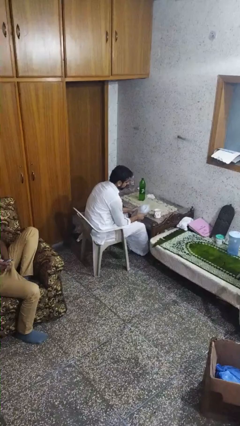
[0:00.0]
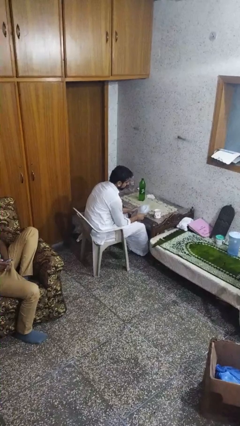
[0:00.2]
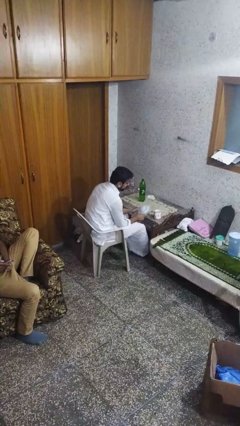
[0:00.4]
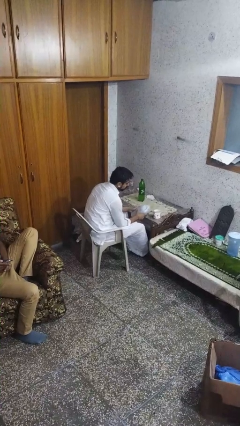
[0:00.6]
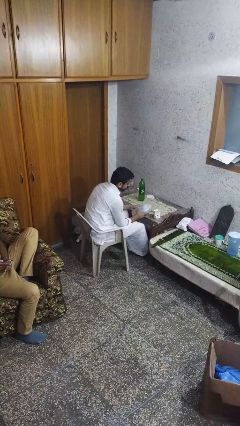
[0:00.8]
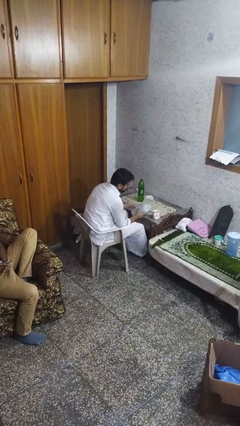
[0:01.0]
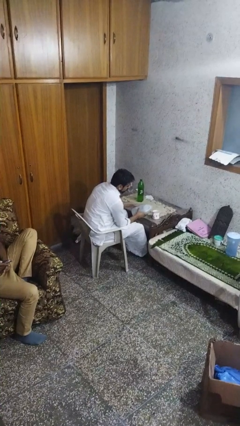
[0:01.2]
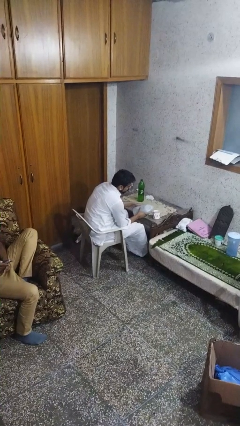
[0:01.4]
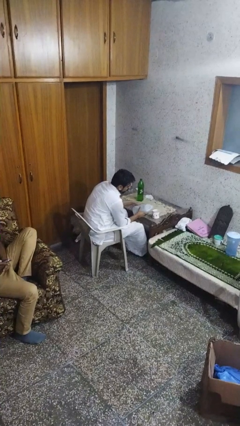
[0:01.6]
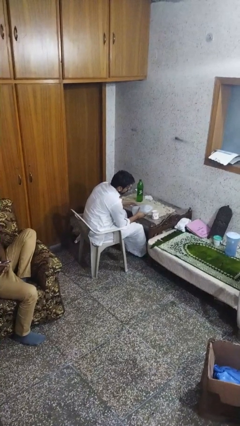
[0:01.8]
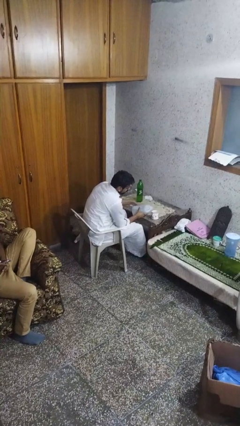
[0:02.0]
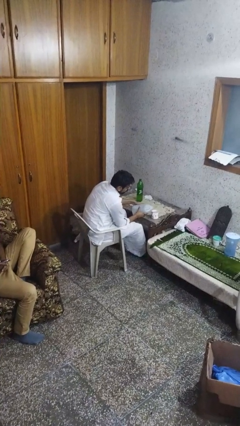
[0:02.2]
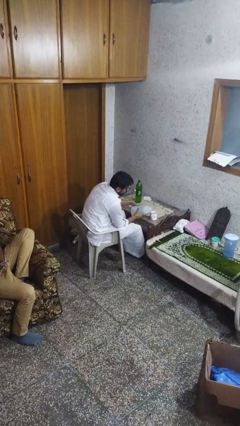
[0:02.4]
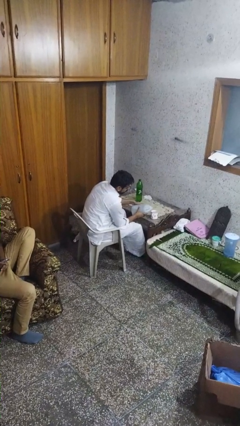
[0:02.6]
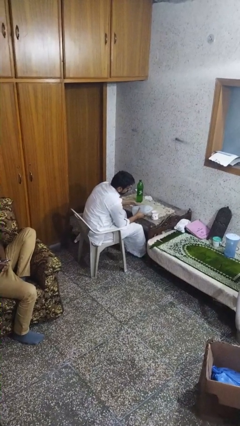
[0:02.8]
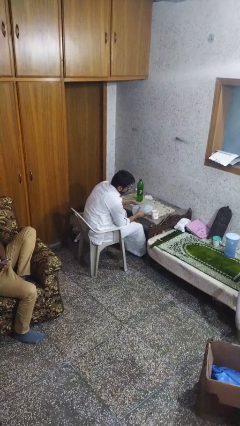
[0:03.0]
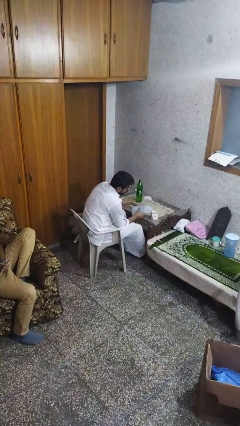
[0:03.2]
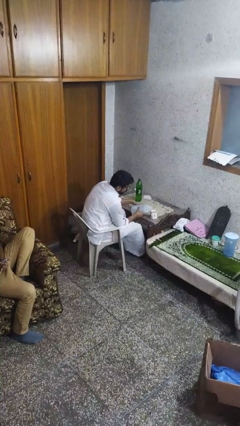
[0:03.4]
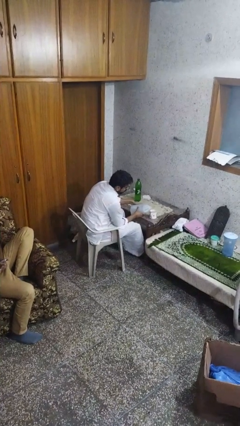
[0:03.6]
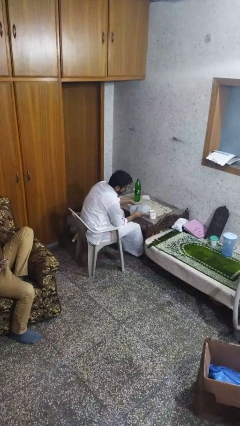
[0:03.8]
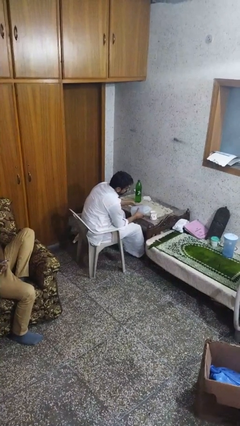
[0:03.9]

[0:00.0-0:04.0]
person pours liquid into cup

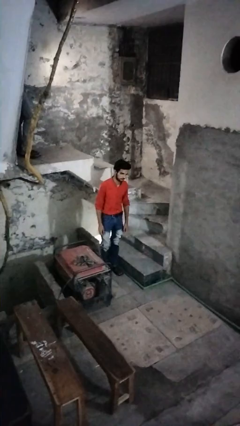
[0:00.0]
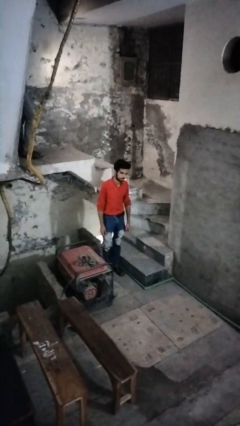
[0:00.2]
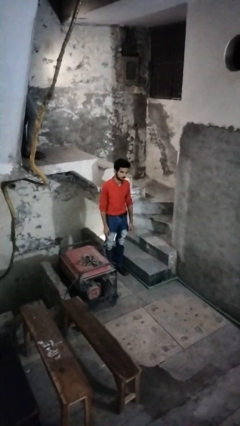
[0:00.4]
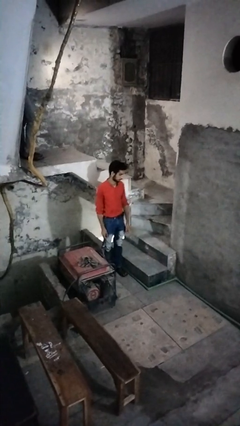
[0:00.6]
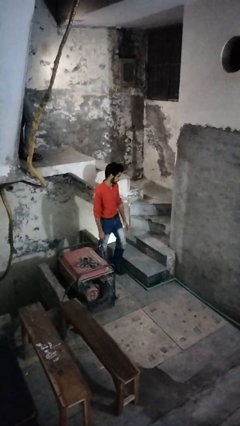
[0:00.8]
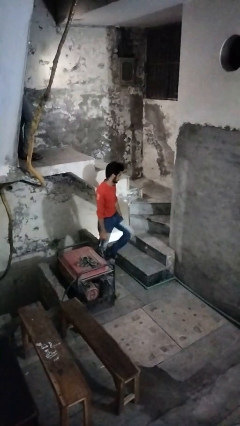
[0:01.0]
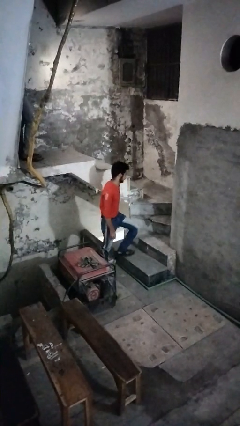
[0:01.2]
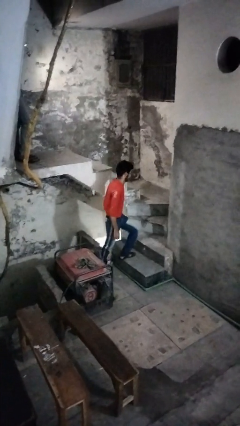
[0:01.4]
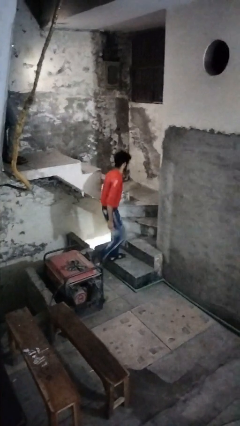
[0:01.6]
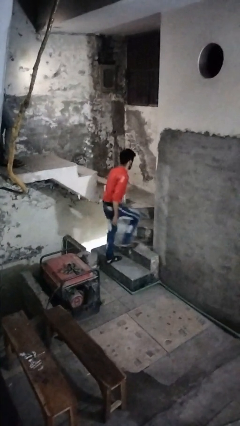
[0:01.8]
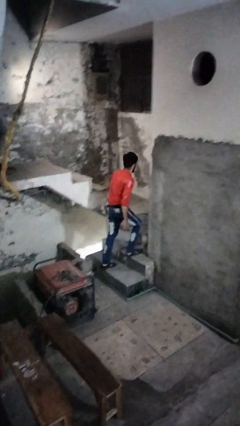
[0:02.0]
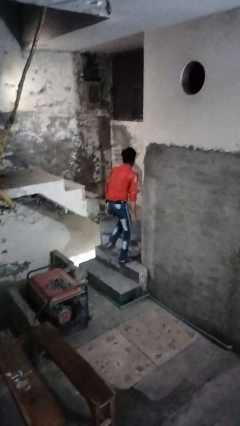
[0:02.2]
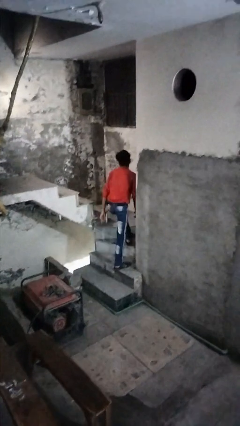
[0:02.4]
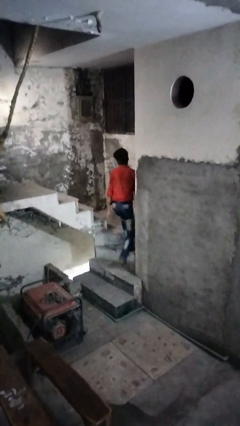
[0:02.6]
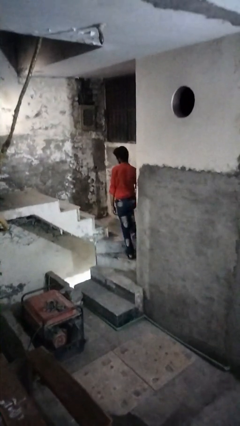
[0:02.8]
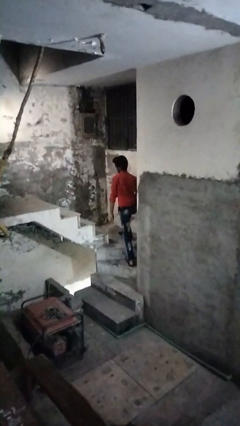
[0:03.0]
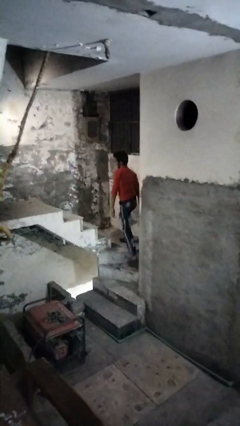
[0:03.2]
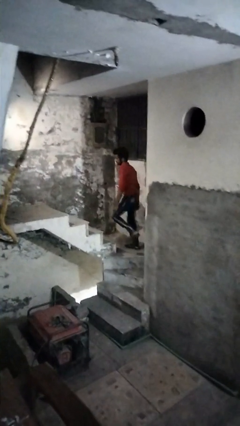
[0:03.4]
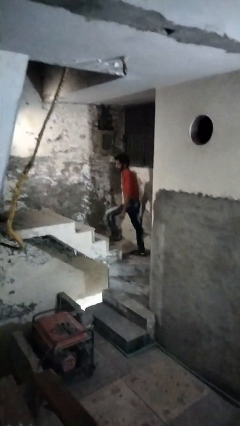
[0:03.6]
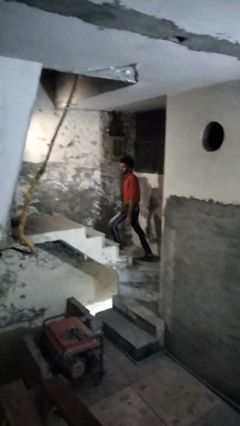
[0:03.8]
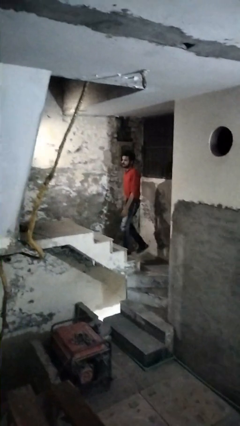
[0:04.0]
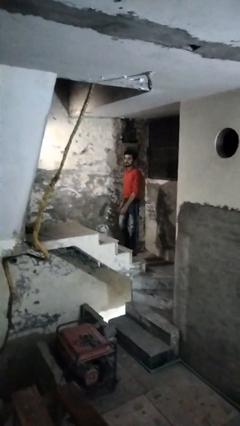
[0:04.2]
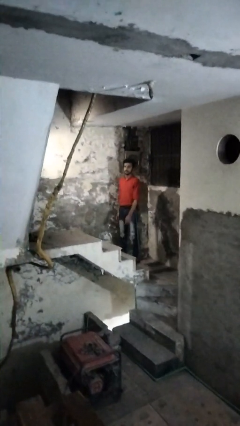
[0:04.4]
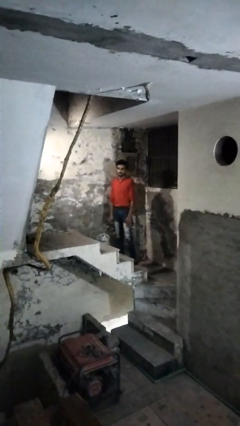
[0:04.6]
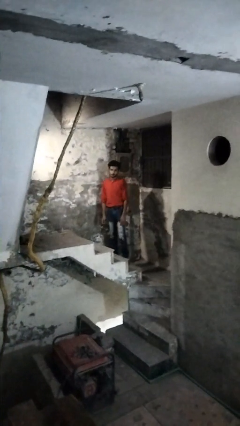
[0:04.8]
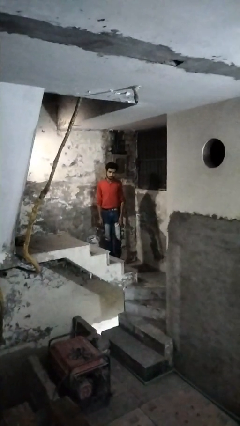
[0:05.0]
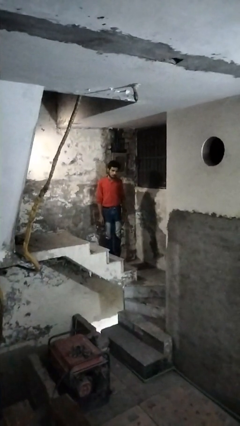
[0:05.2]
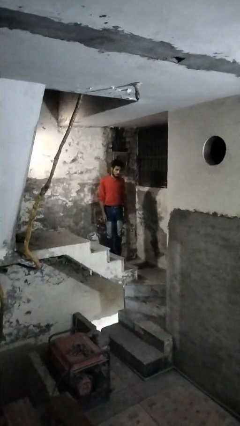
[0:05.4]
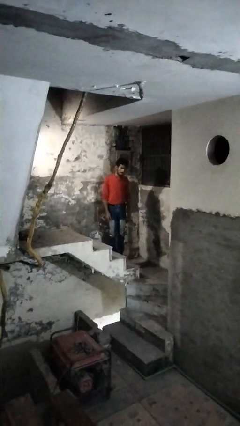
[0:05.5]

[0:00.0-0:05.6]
person climbs up stairs

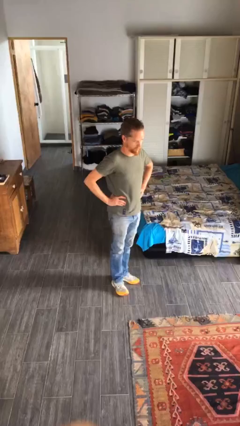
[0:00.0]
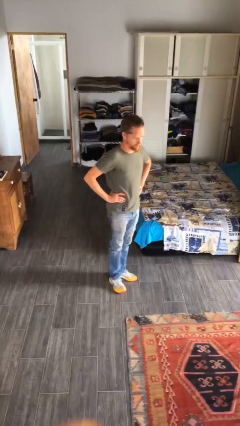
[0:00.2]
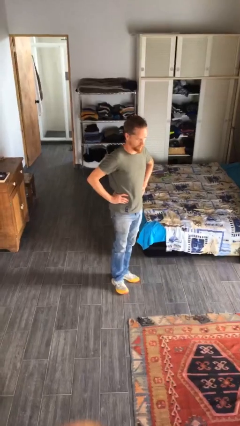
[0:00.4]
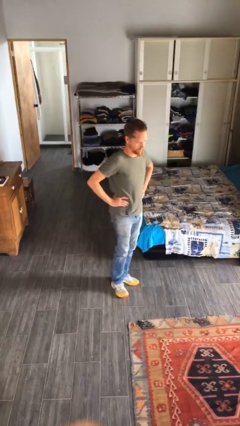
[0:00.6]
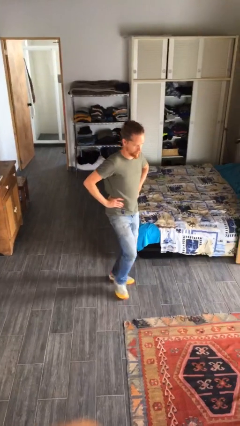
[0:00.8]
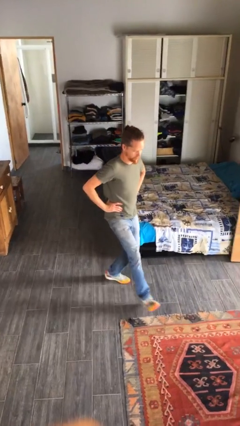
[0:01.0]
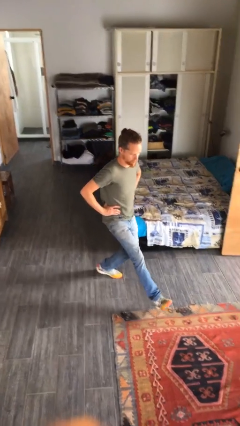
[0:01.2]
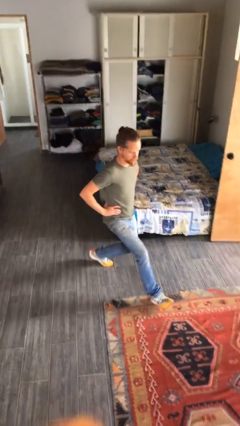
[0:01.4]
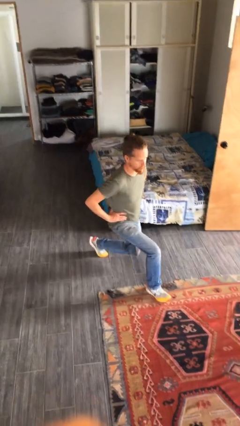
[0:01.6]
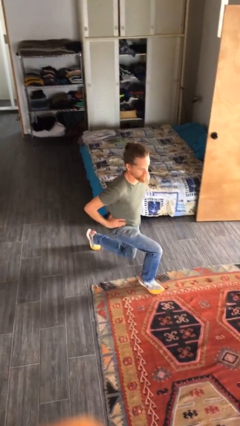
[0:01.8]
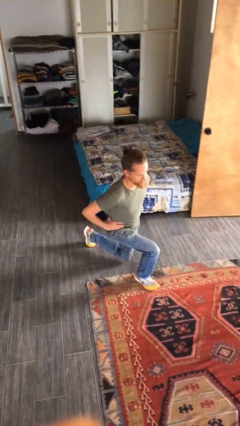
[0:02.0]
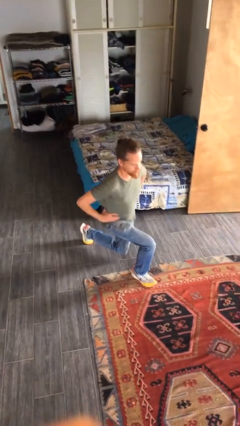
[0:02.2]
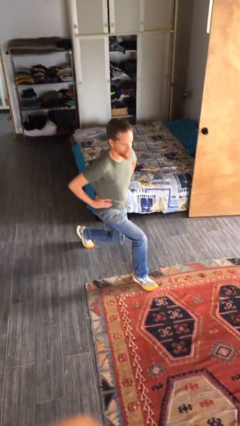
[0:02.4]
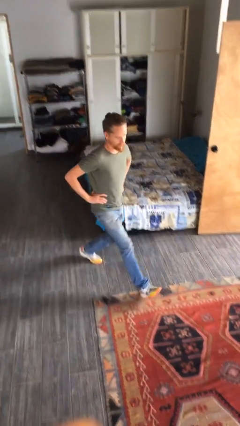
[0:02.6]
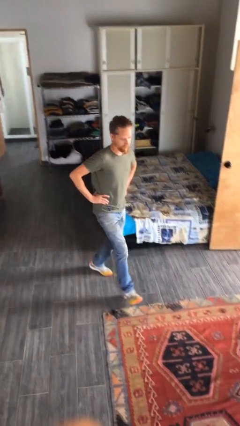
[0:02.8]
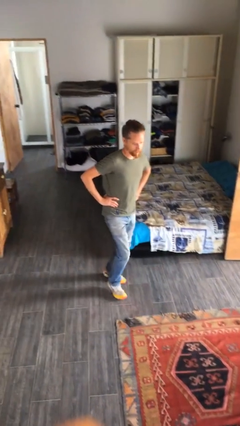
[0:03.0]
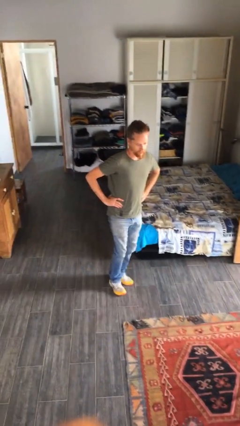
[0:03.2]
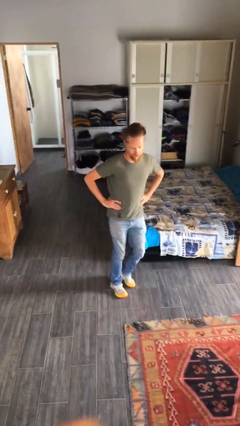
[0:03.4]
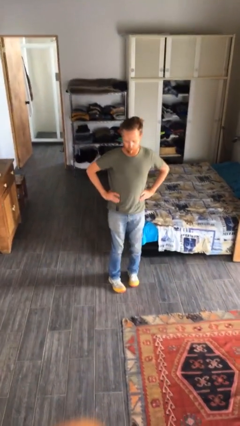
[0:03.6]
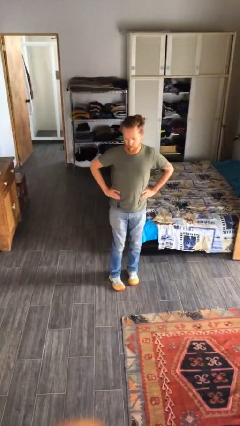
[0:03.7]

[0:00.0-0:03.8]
person exercises with lunges

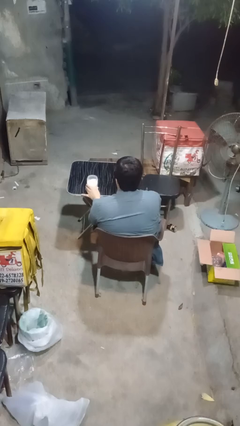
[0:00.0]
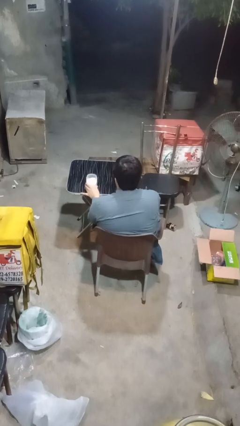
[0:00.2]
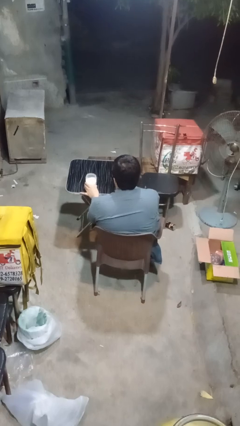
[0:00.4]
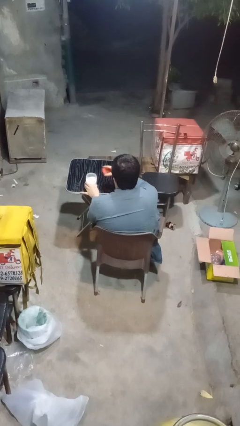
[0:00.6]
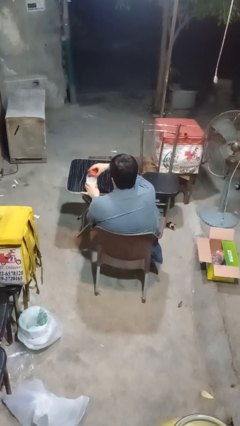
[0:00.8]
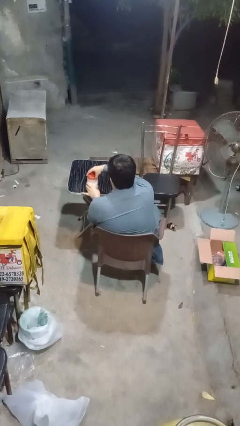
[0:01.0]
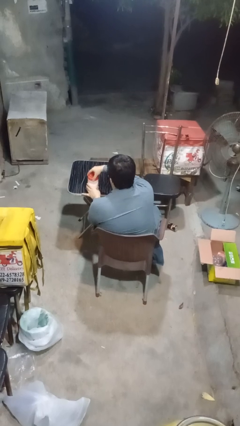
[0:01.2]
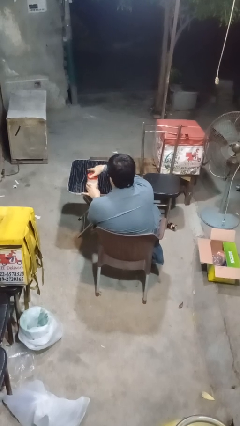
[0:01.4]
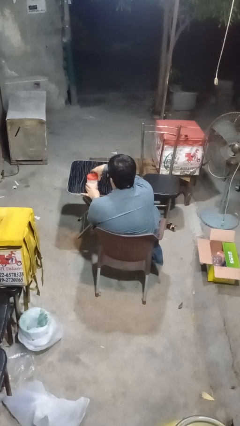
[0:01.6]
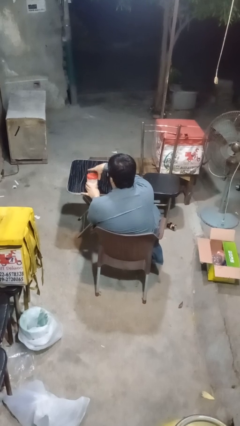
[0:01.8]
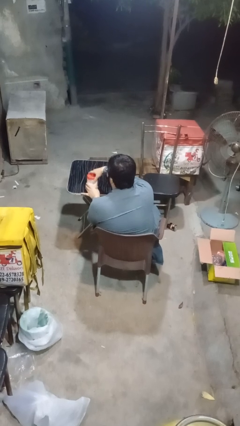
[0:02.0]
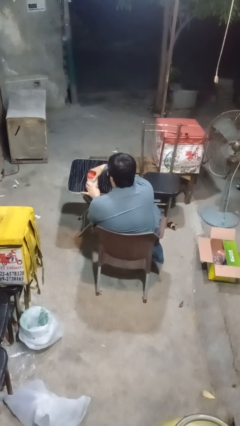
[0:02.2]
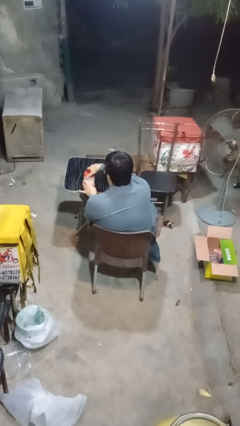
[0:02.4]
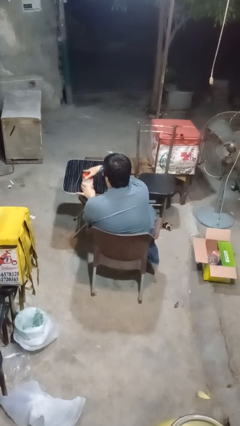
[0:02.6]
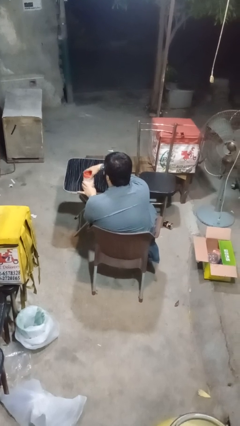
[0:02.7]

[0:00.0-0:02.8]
person closes jar

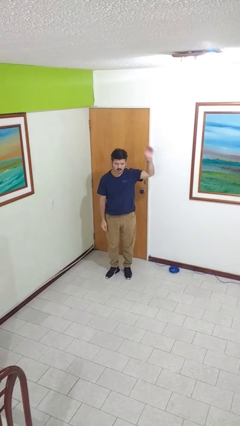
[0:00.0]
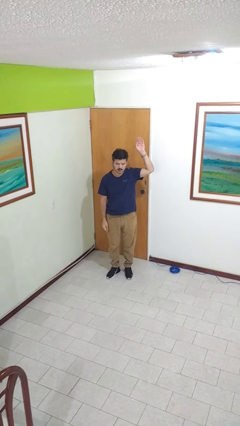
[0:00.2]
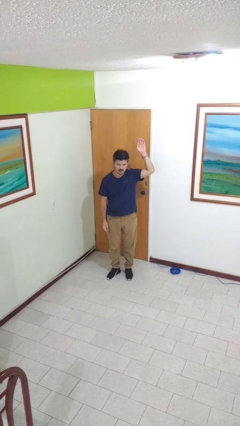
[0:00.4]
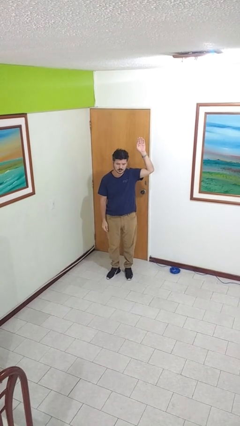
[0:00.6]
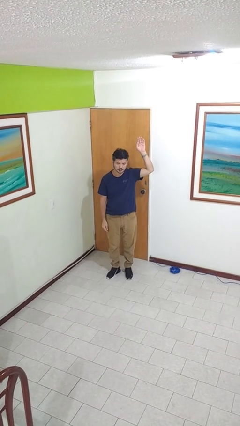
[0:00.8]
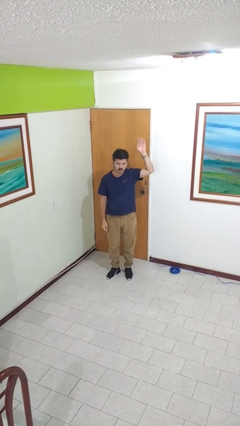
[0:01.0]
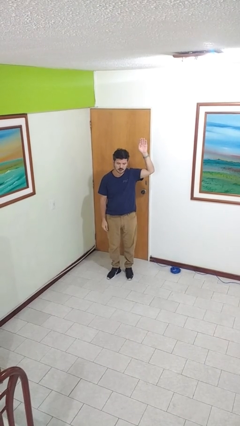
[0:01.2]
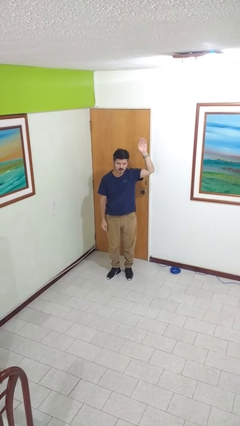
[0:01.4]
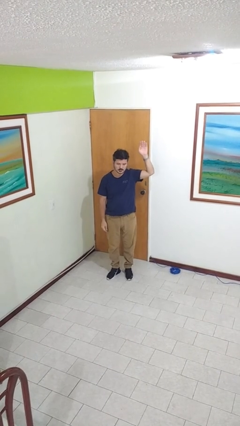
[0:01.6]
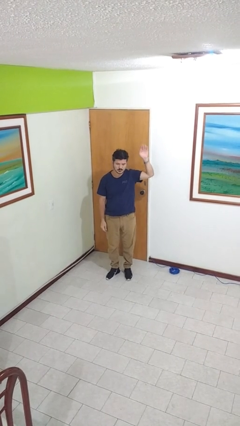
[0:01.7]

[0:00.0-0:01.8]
person gestures raise hand
